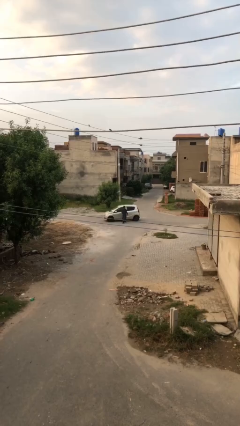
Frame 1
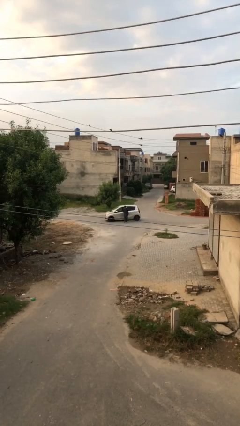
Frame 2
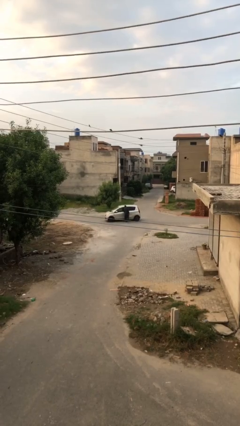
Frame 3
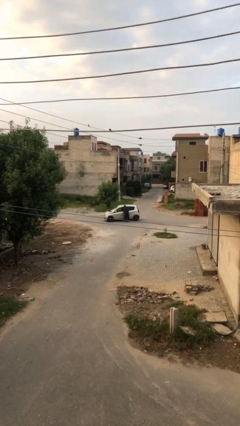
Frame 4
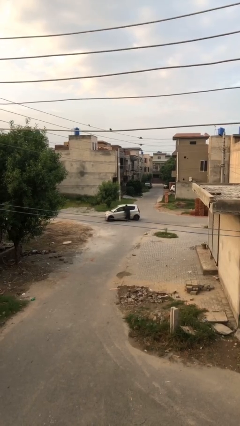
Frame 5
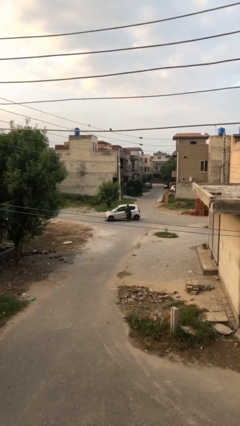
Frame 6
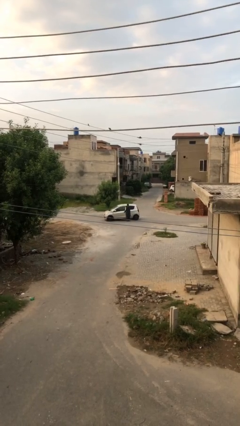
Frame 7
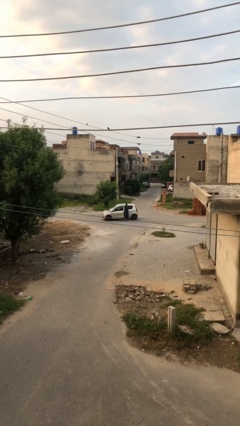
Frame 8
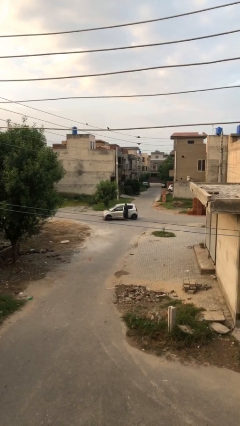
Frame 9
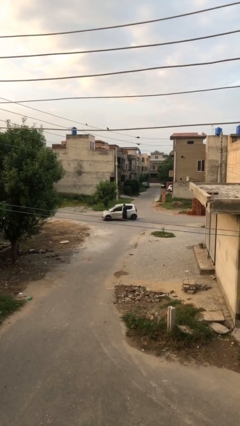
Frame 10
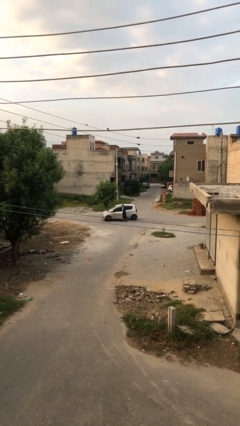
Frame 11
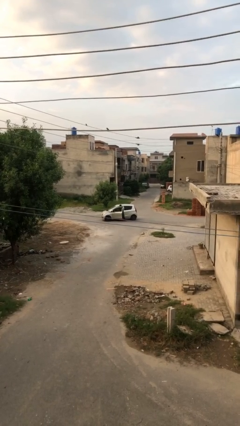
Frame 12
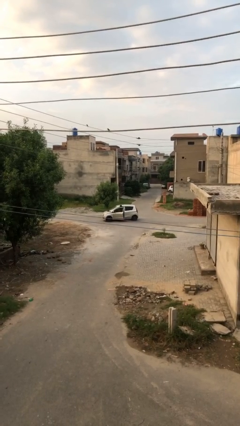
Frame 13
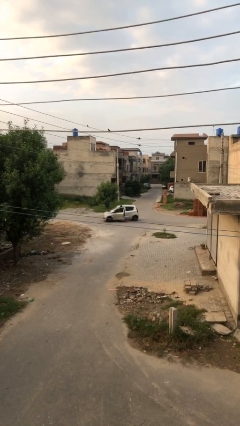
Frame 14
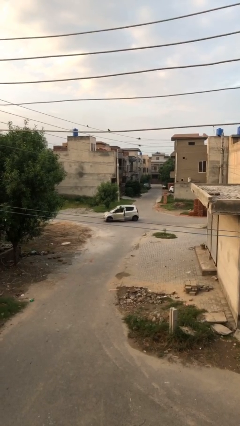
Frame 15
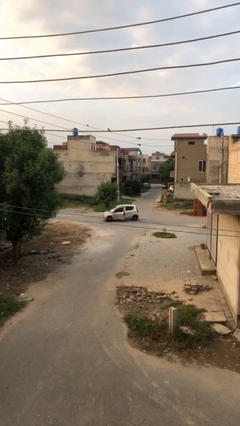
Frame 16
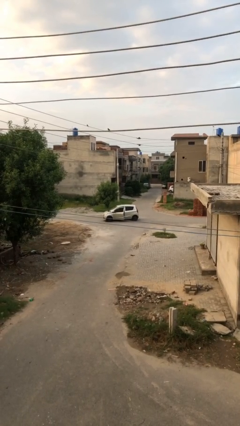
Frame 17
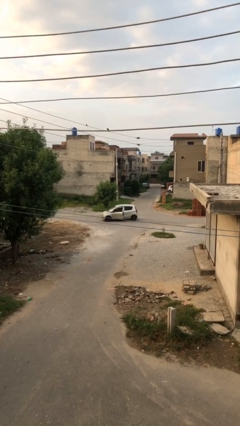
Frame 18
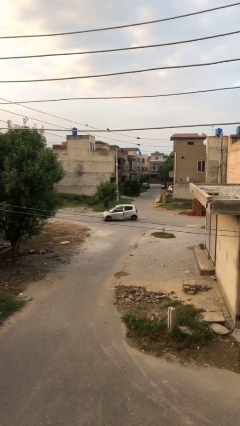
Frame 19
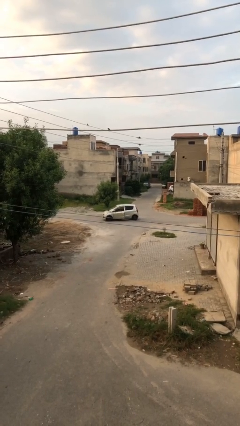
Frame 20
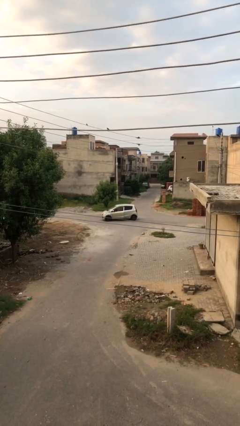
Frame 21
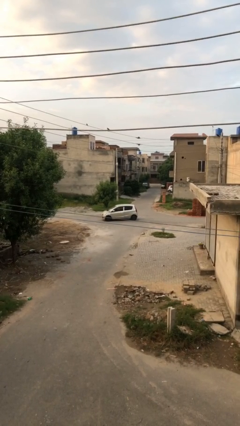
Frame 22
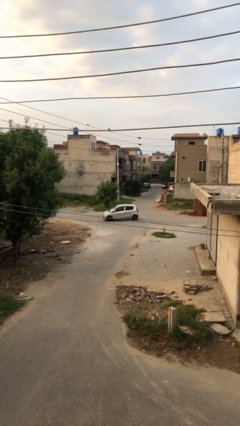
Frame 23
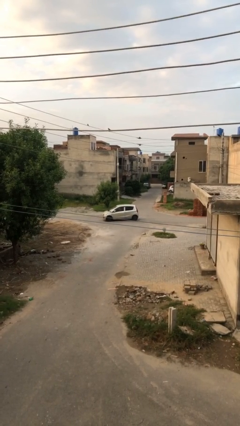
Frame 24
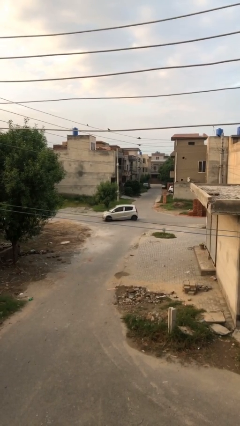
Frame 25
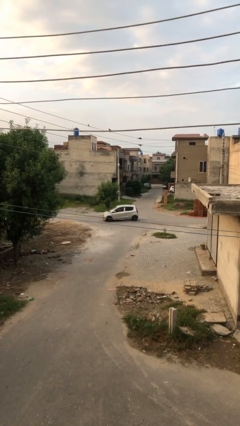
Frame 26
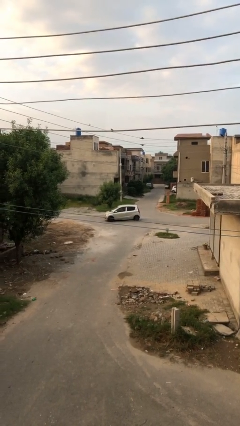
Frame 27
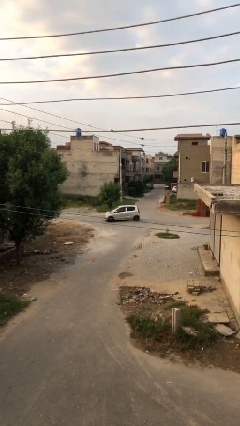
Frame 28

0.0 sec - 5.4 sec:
car picks up person

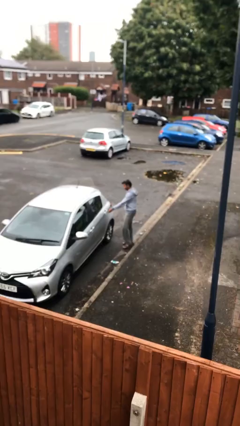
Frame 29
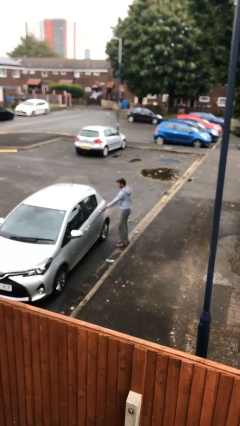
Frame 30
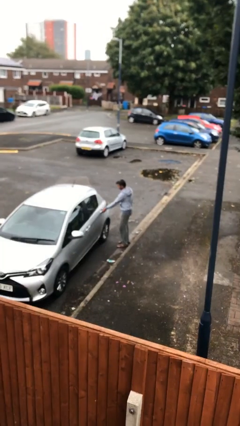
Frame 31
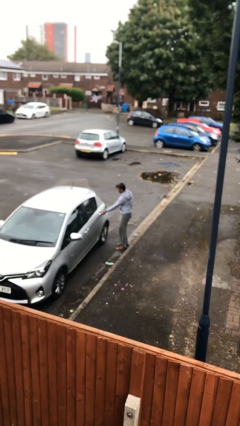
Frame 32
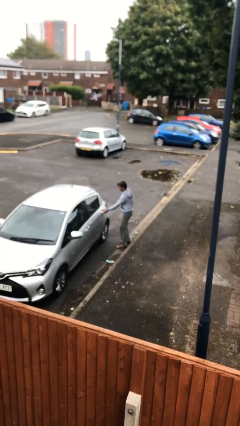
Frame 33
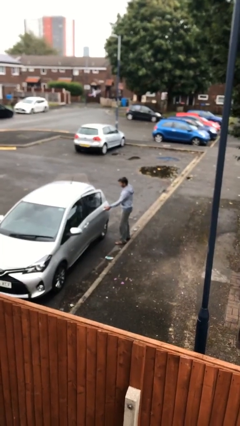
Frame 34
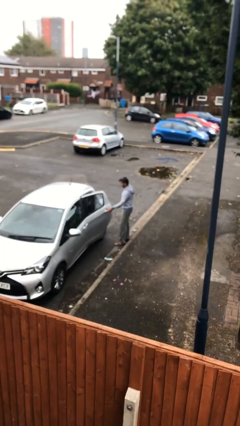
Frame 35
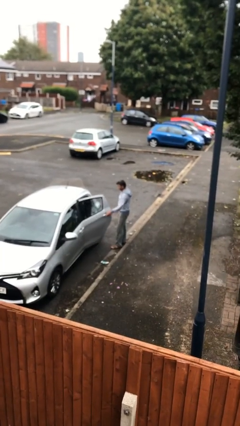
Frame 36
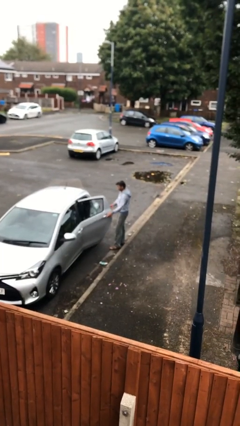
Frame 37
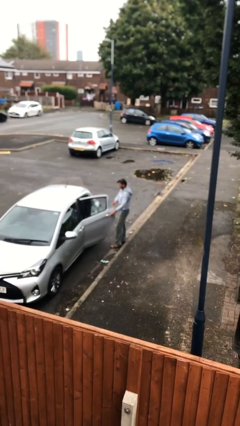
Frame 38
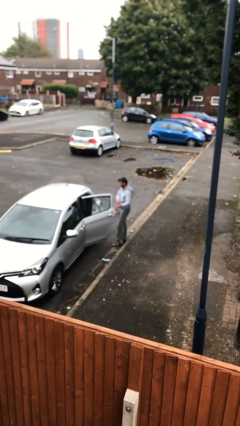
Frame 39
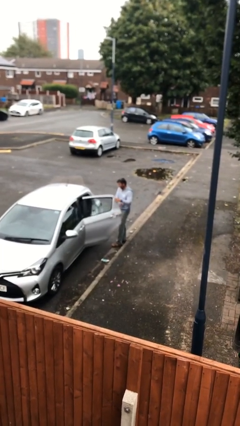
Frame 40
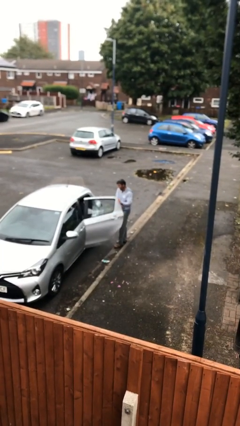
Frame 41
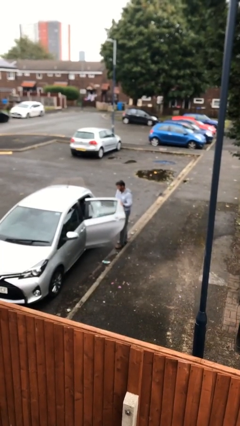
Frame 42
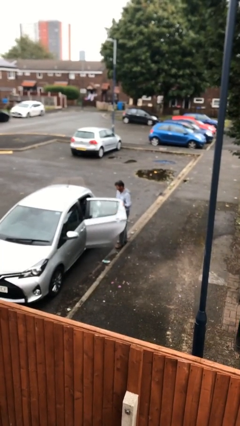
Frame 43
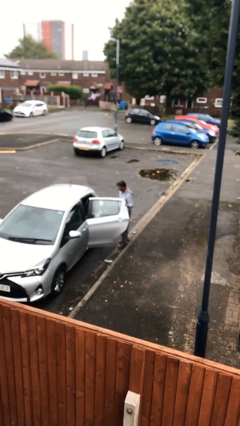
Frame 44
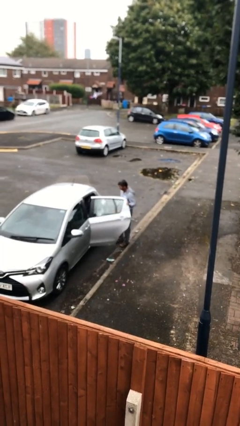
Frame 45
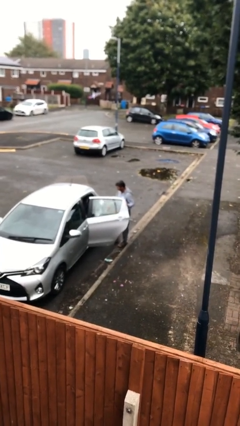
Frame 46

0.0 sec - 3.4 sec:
person opens car door

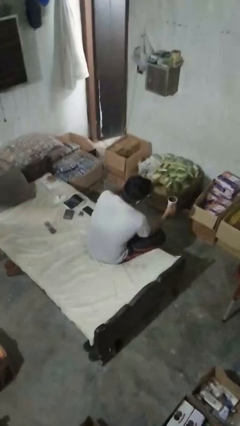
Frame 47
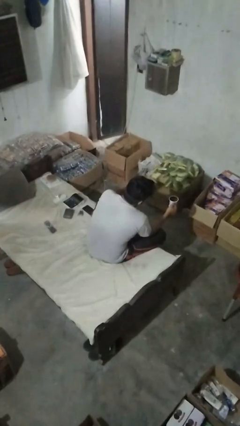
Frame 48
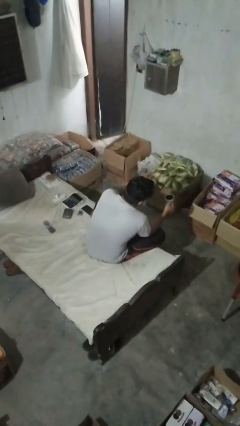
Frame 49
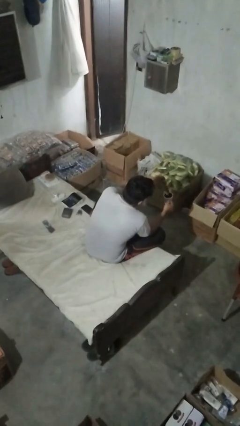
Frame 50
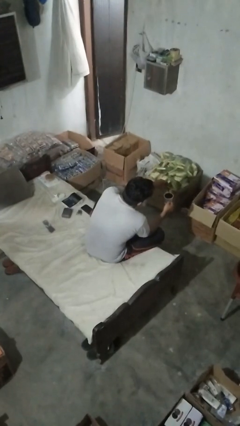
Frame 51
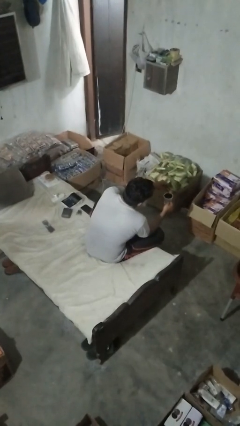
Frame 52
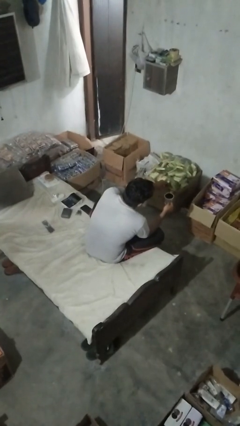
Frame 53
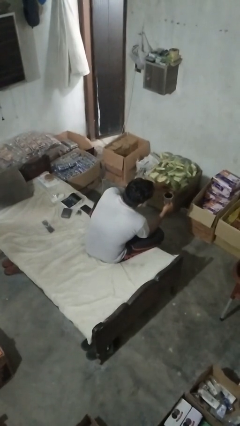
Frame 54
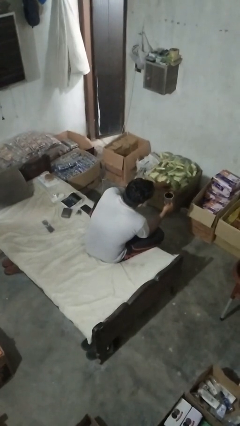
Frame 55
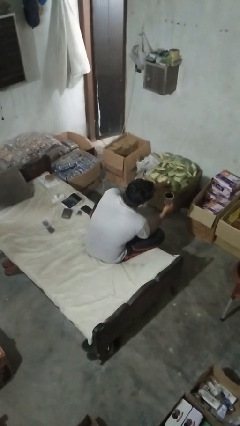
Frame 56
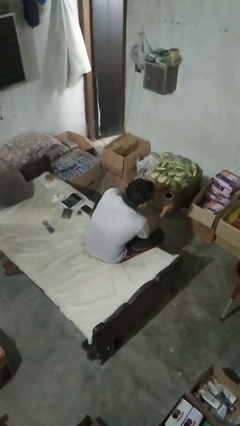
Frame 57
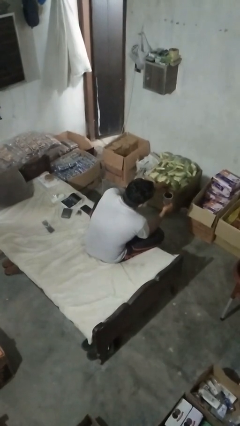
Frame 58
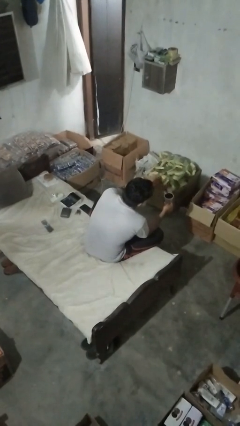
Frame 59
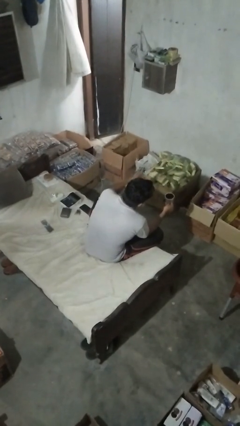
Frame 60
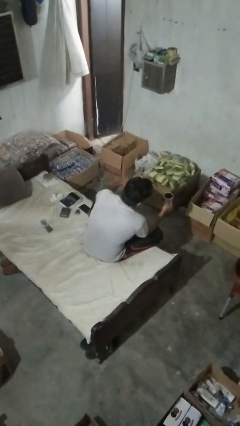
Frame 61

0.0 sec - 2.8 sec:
person stirs mug

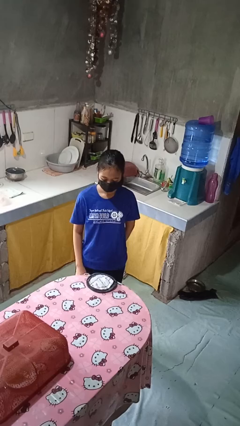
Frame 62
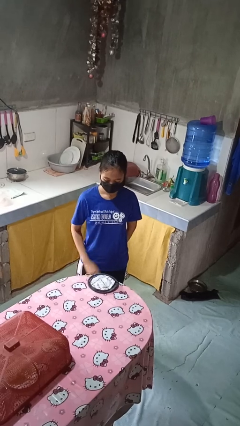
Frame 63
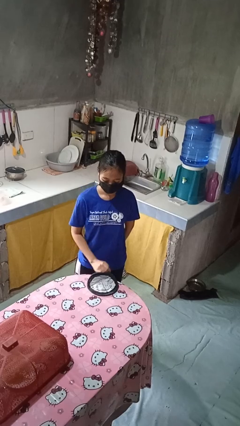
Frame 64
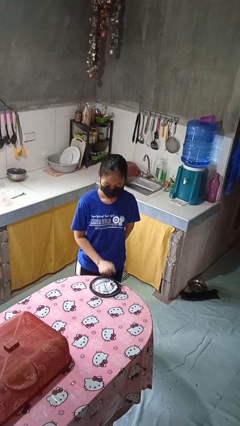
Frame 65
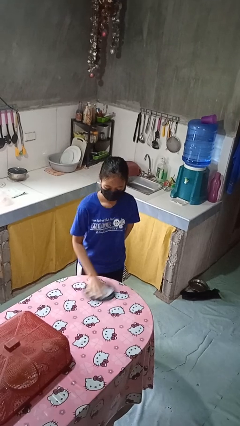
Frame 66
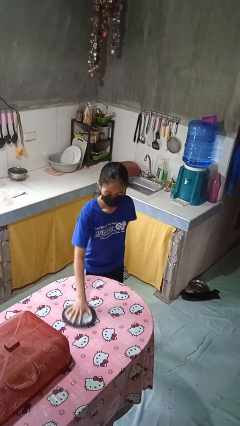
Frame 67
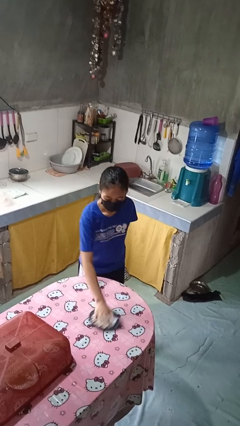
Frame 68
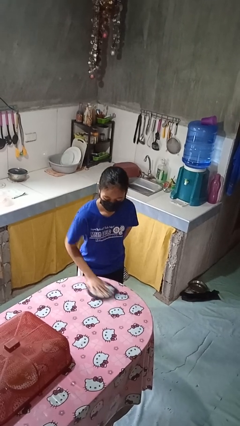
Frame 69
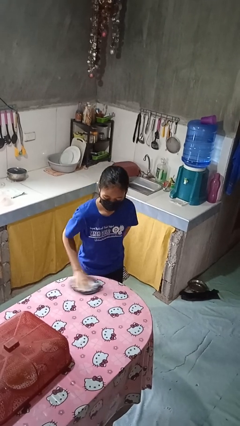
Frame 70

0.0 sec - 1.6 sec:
person cleans table with rag

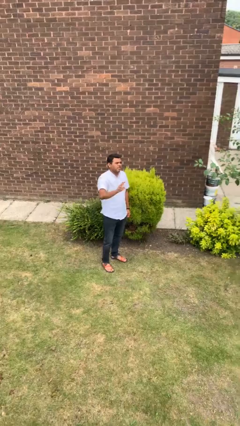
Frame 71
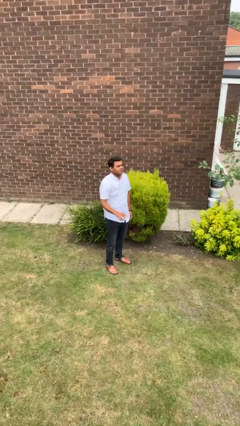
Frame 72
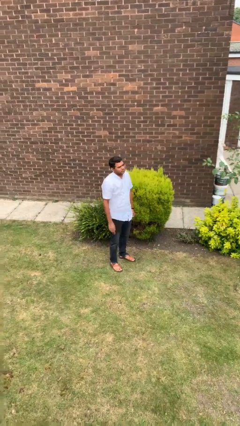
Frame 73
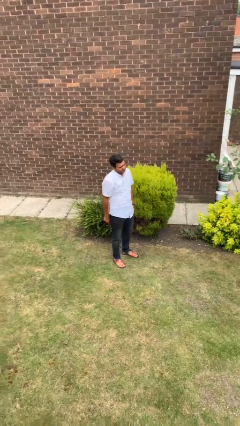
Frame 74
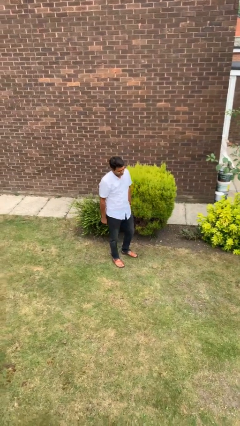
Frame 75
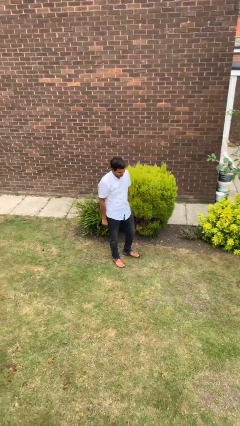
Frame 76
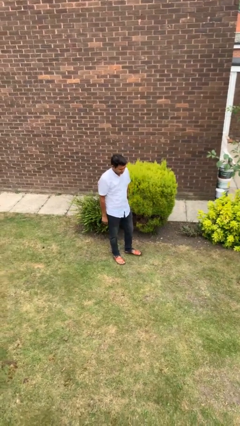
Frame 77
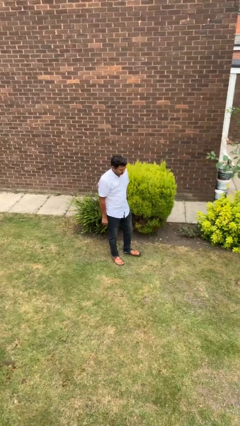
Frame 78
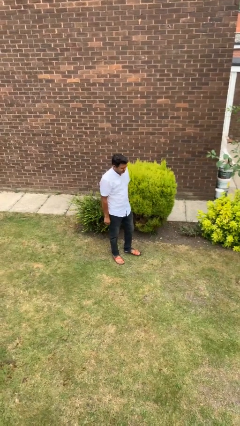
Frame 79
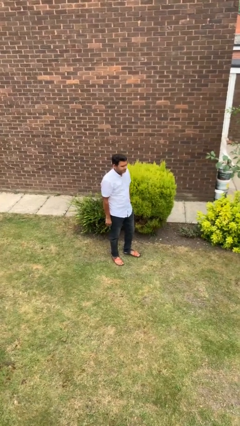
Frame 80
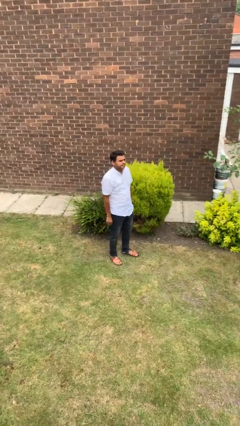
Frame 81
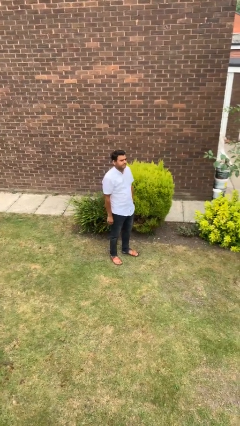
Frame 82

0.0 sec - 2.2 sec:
person gestures lower hand

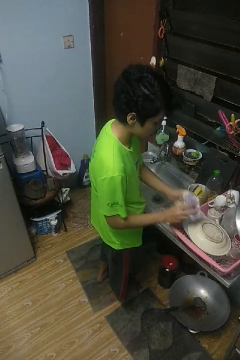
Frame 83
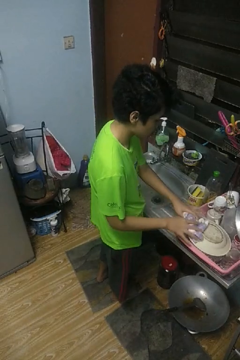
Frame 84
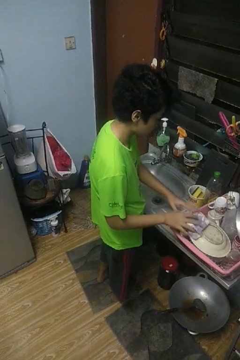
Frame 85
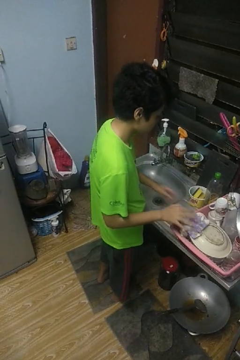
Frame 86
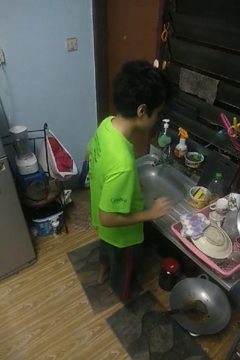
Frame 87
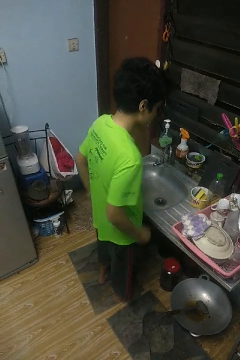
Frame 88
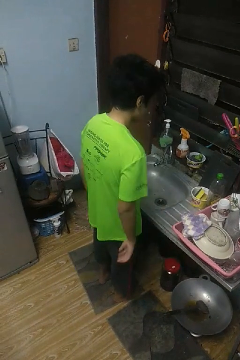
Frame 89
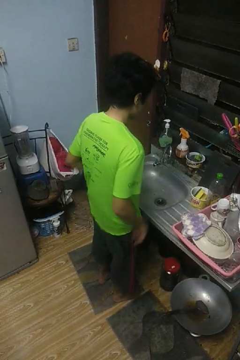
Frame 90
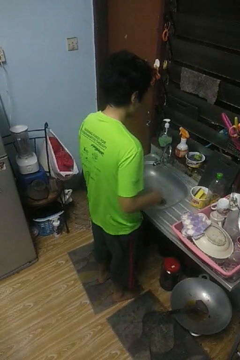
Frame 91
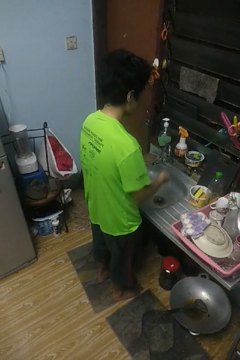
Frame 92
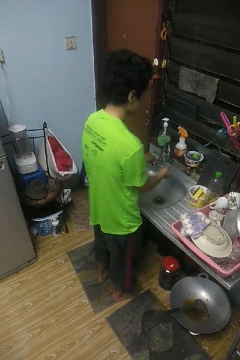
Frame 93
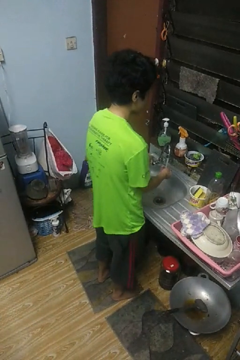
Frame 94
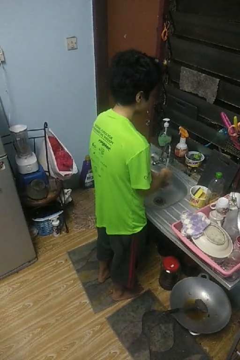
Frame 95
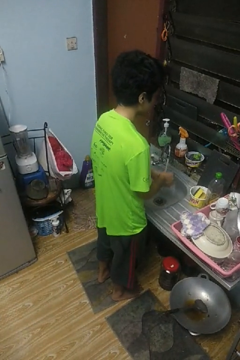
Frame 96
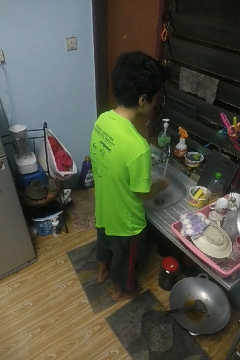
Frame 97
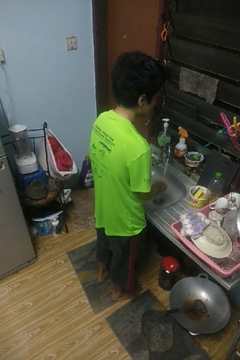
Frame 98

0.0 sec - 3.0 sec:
person washes hands
